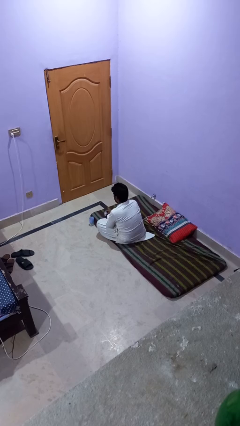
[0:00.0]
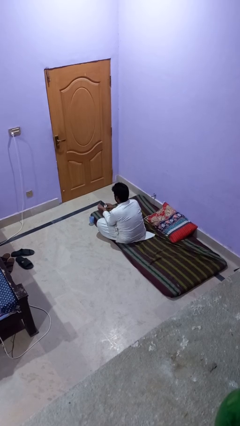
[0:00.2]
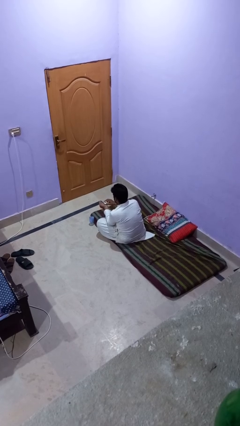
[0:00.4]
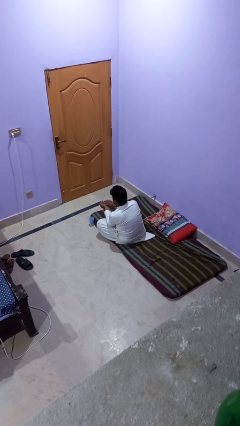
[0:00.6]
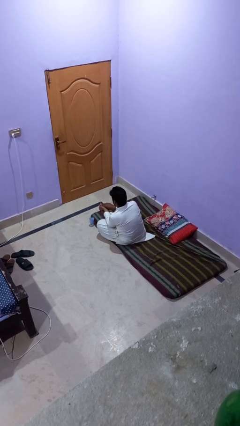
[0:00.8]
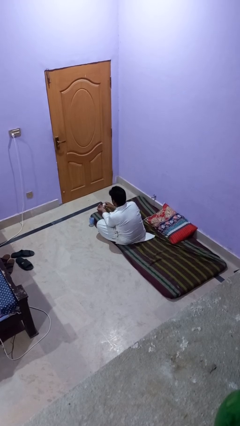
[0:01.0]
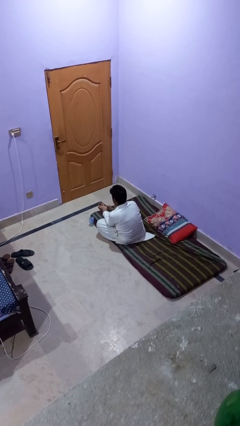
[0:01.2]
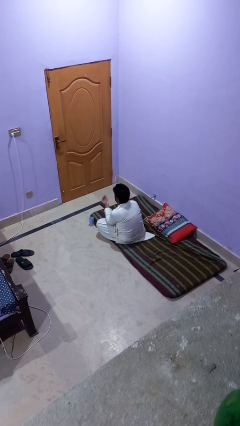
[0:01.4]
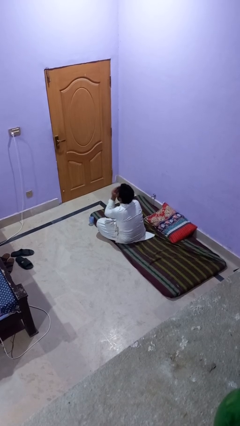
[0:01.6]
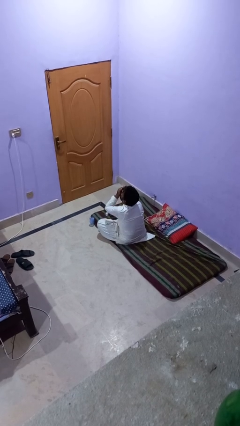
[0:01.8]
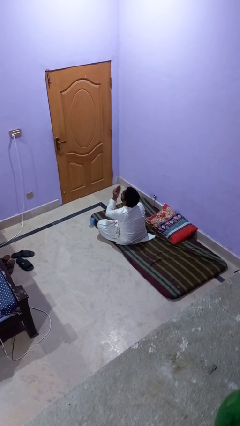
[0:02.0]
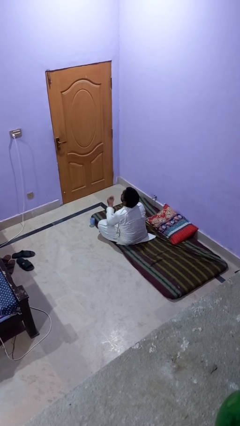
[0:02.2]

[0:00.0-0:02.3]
person takes medicine pills

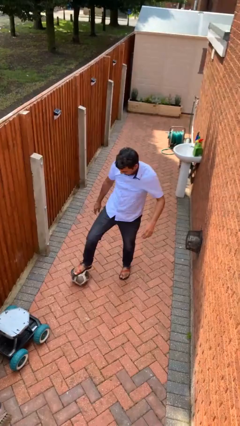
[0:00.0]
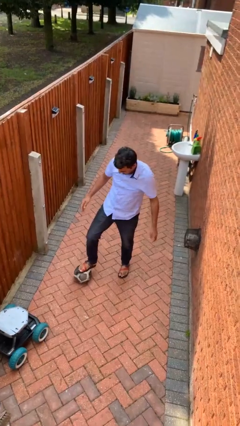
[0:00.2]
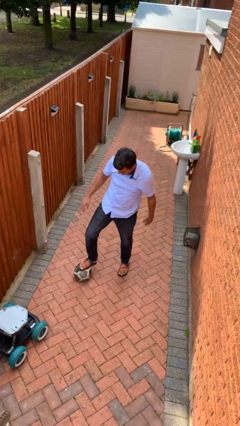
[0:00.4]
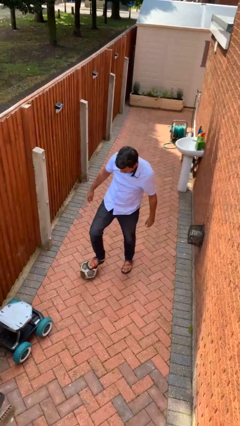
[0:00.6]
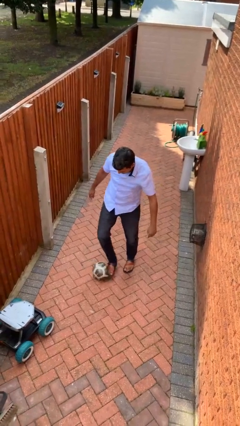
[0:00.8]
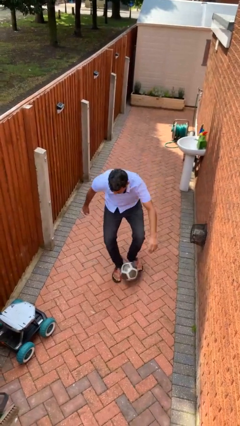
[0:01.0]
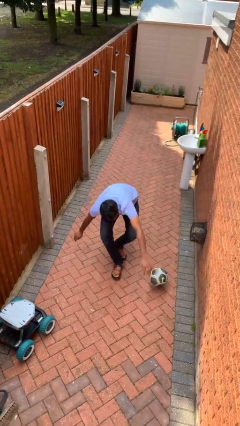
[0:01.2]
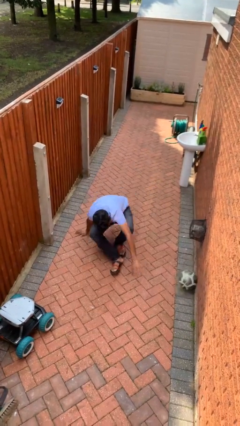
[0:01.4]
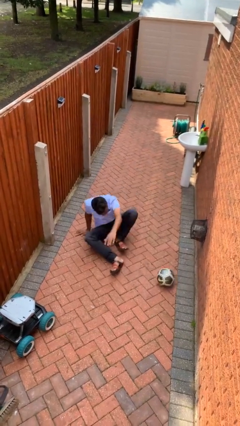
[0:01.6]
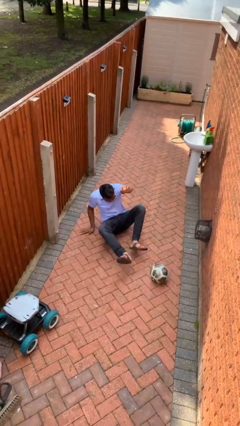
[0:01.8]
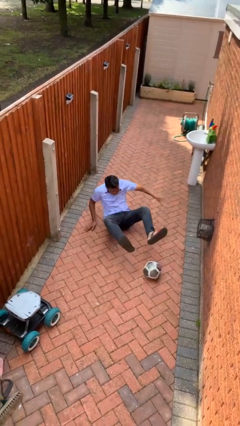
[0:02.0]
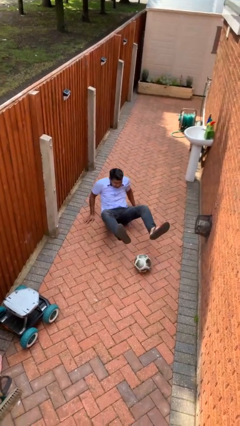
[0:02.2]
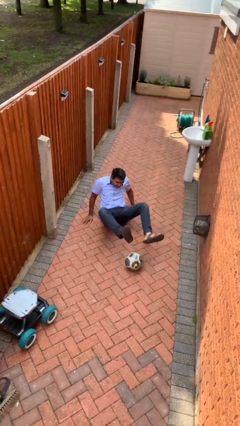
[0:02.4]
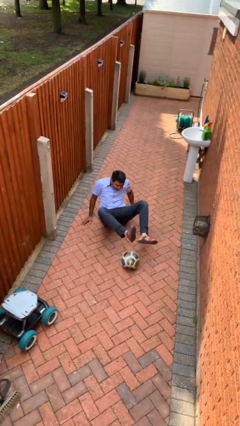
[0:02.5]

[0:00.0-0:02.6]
person trips on object on floor

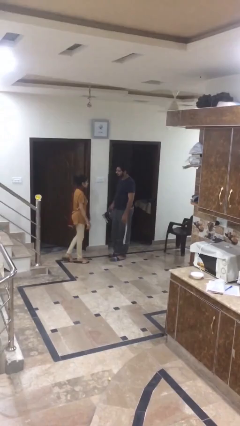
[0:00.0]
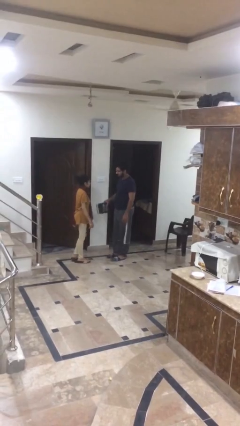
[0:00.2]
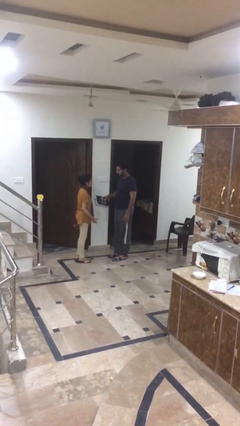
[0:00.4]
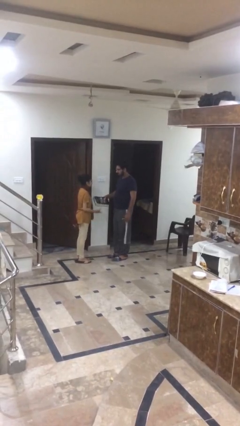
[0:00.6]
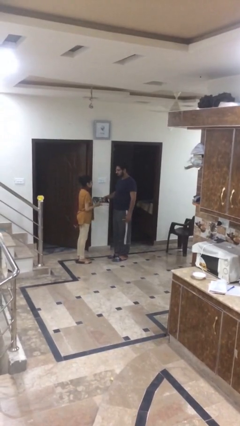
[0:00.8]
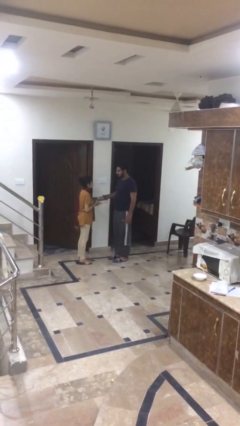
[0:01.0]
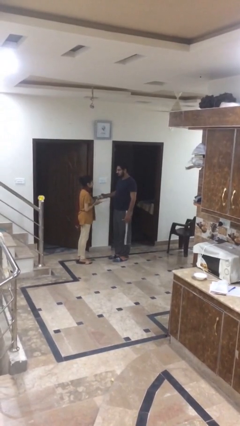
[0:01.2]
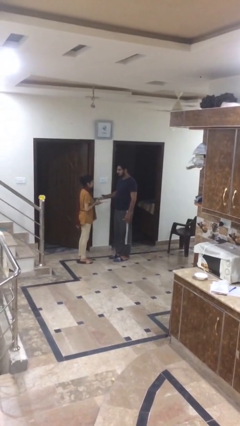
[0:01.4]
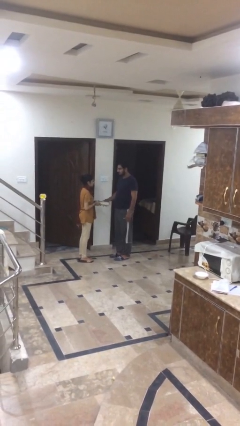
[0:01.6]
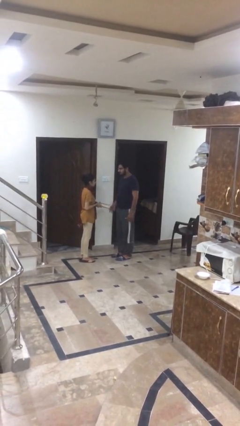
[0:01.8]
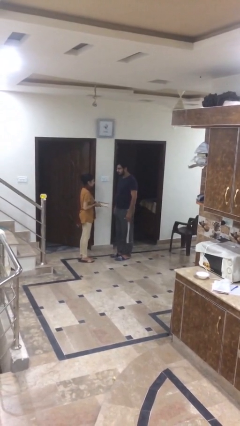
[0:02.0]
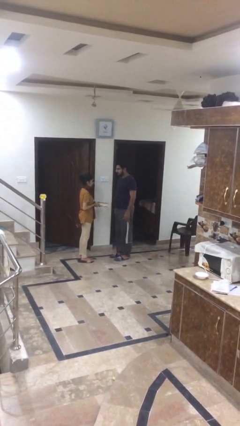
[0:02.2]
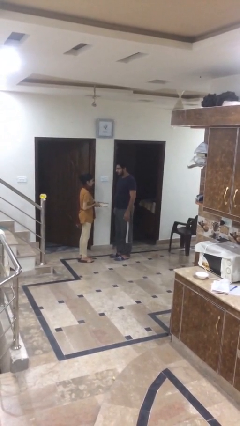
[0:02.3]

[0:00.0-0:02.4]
person transfers object to person

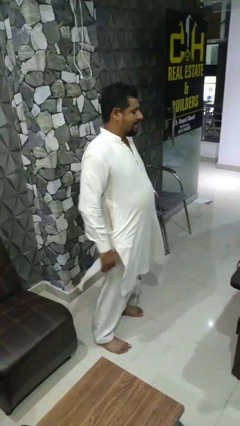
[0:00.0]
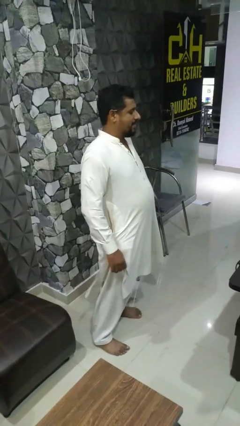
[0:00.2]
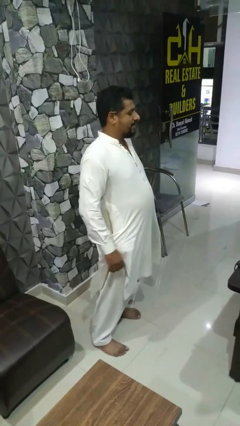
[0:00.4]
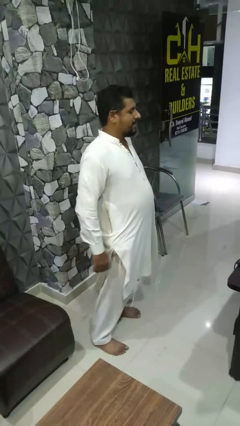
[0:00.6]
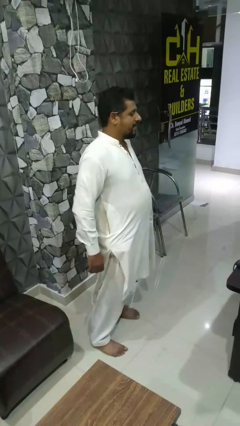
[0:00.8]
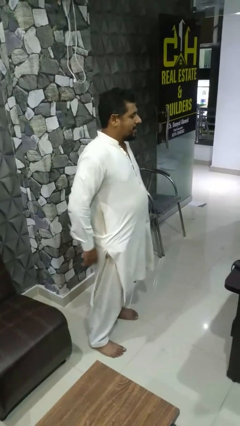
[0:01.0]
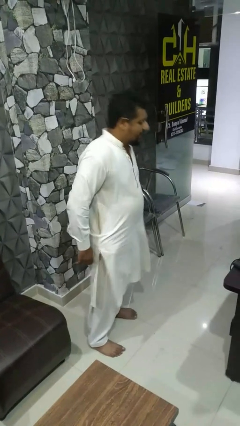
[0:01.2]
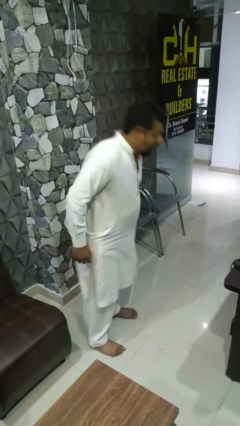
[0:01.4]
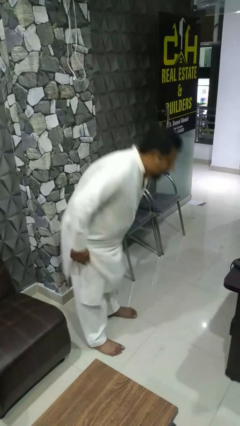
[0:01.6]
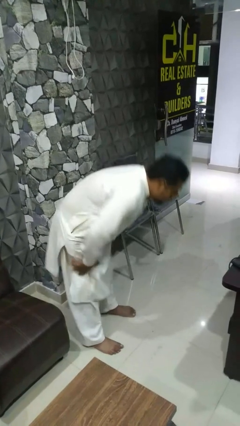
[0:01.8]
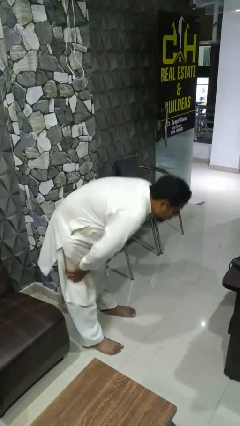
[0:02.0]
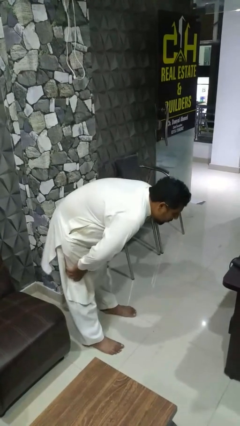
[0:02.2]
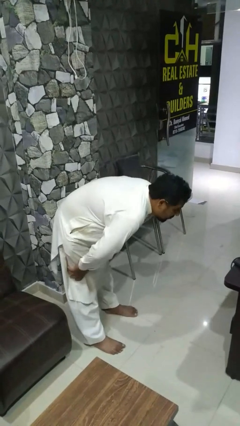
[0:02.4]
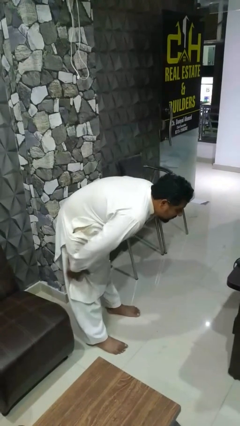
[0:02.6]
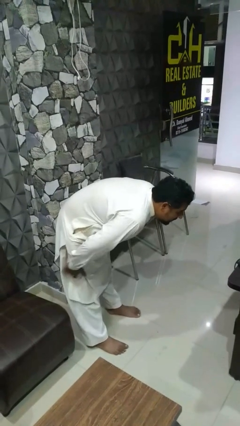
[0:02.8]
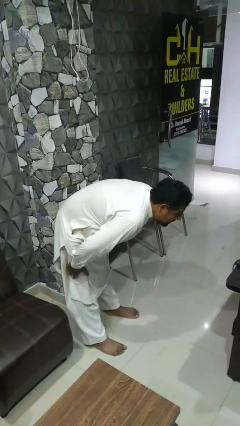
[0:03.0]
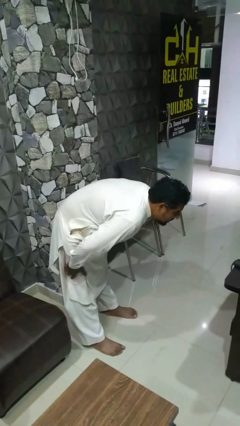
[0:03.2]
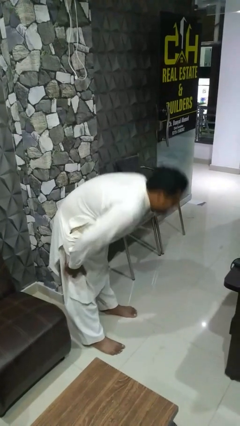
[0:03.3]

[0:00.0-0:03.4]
person bows

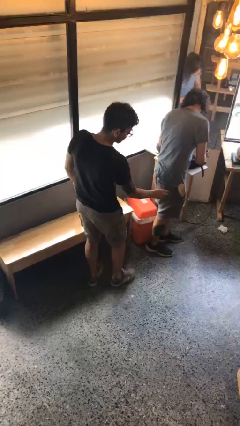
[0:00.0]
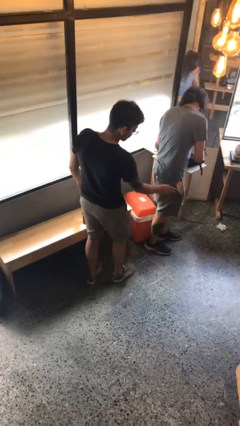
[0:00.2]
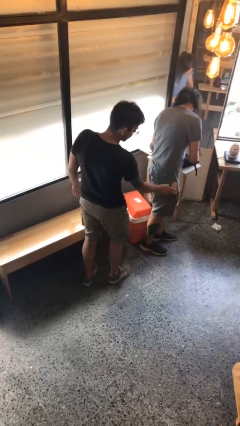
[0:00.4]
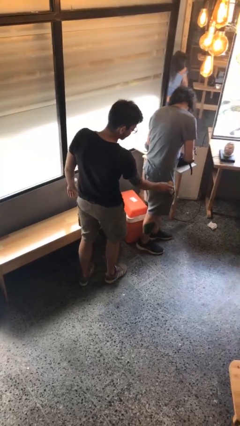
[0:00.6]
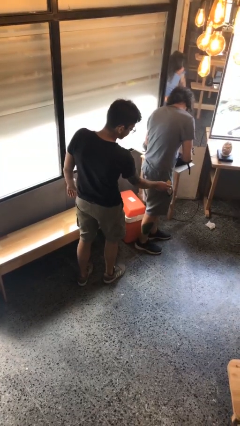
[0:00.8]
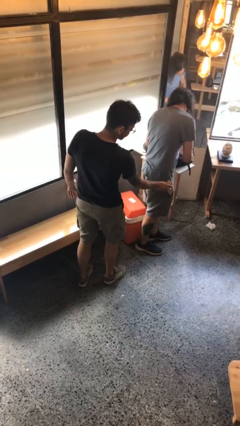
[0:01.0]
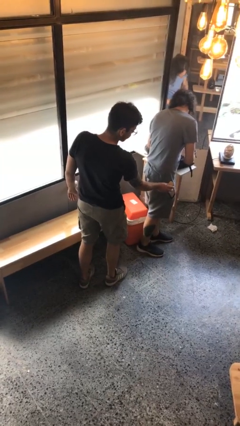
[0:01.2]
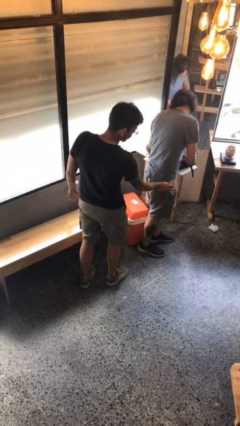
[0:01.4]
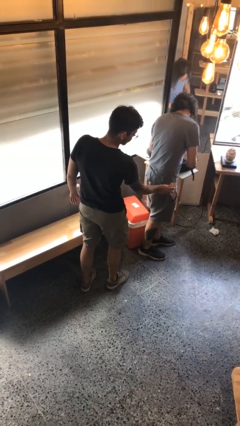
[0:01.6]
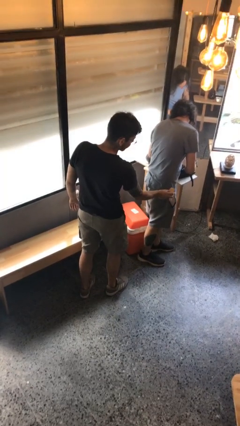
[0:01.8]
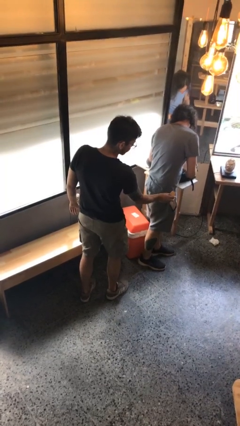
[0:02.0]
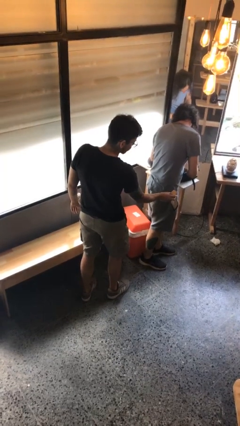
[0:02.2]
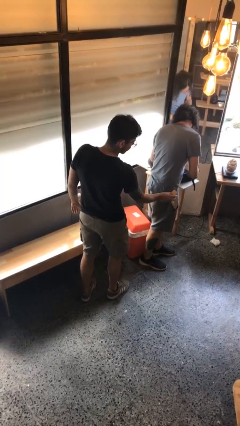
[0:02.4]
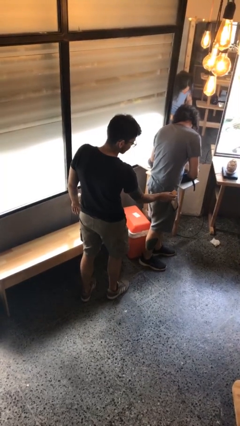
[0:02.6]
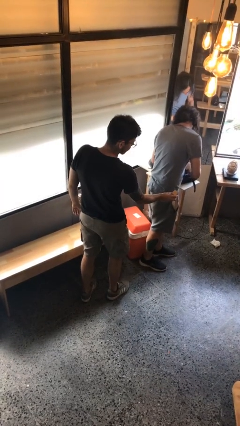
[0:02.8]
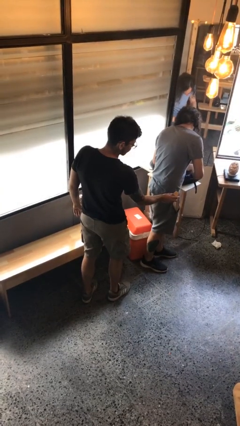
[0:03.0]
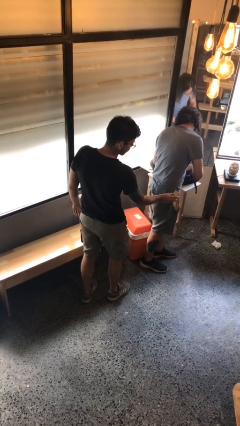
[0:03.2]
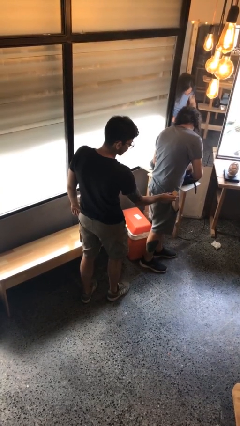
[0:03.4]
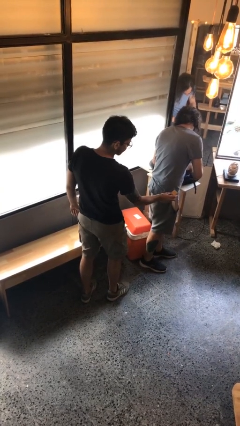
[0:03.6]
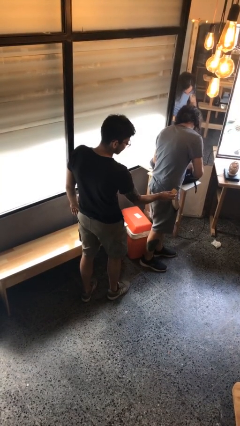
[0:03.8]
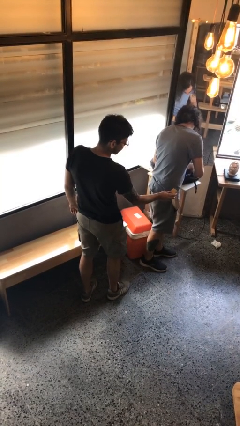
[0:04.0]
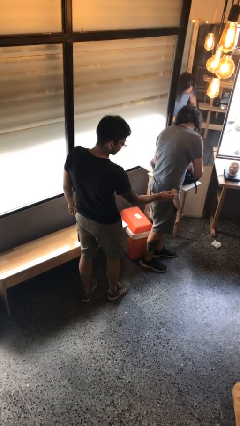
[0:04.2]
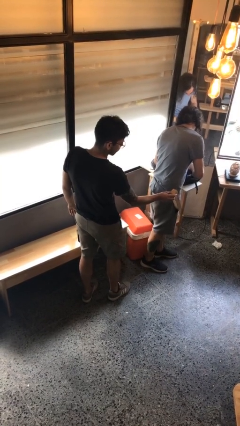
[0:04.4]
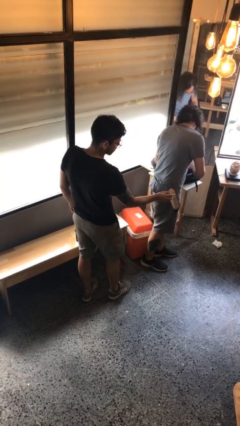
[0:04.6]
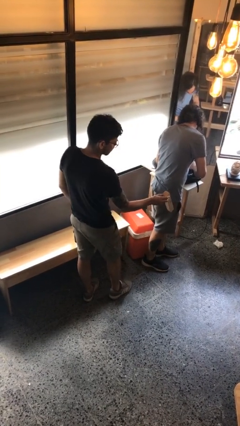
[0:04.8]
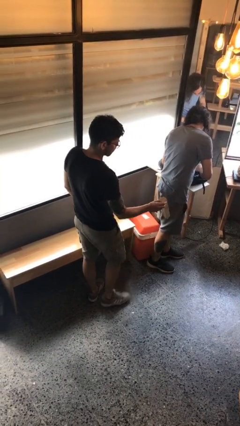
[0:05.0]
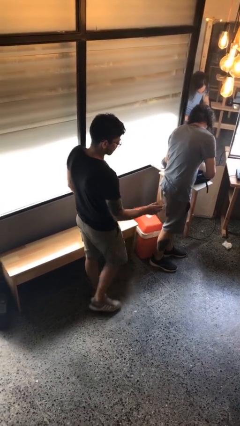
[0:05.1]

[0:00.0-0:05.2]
person steals object from person

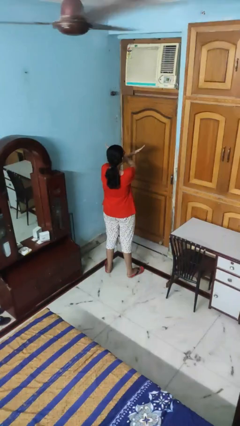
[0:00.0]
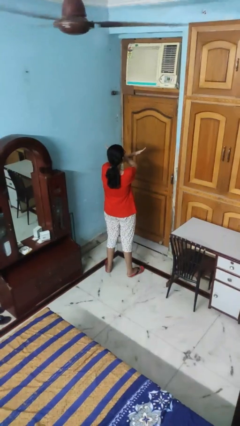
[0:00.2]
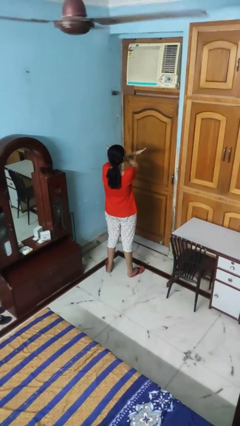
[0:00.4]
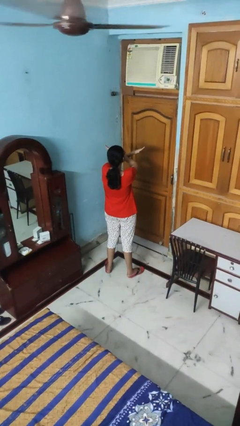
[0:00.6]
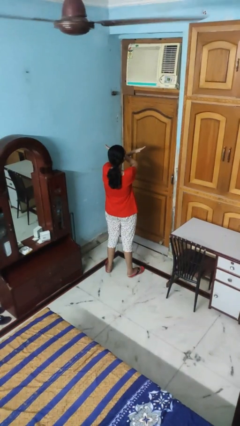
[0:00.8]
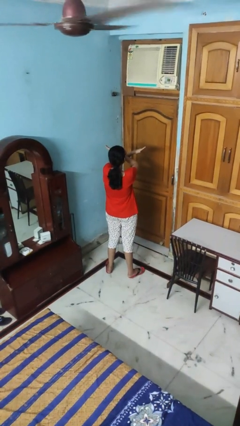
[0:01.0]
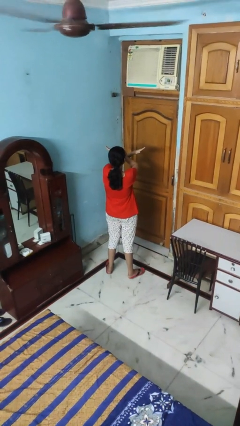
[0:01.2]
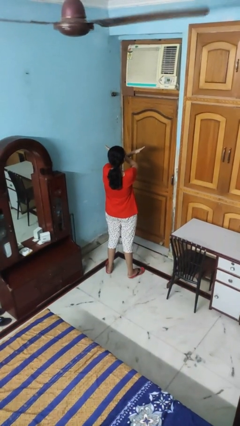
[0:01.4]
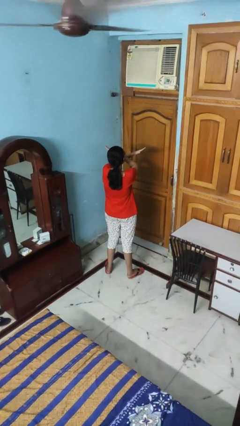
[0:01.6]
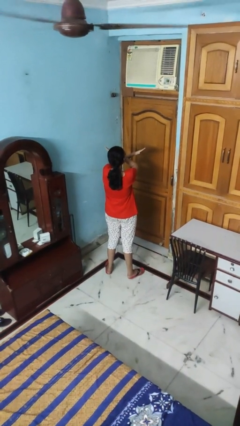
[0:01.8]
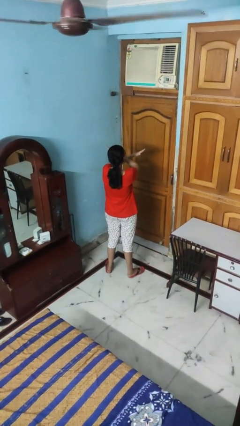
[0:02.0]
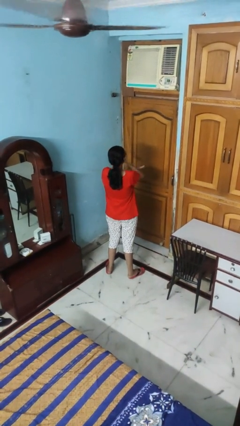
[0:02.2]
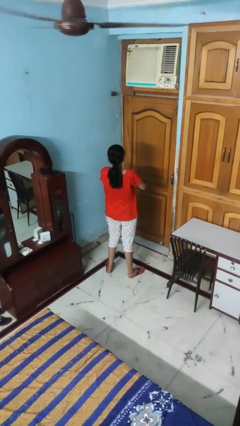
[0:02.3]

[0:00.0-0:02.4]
person gestures arms x
